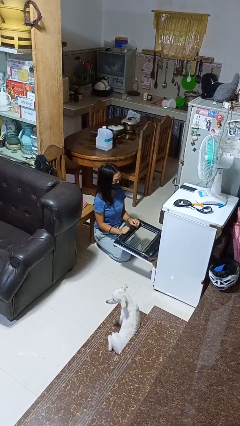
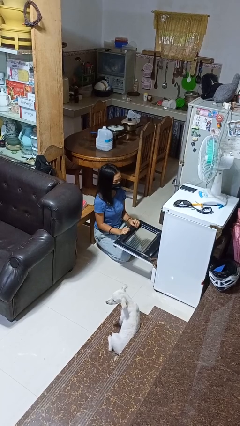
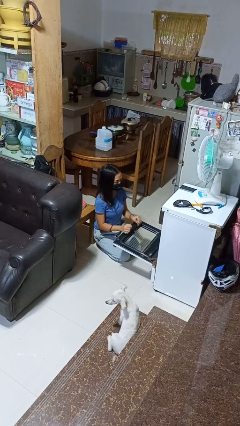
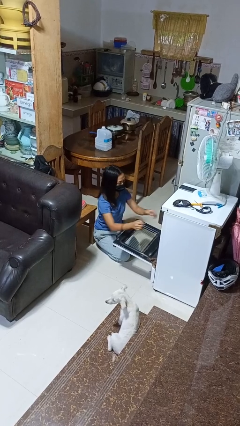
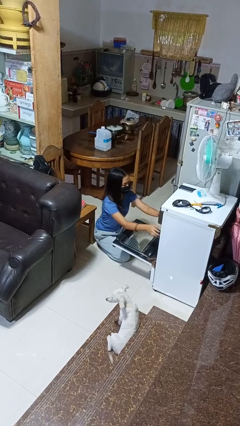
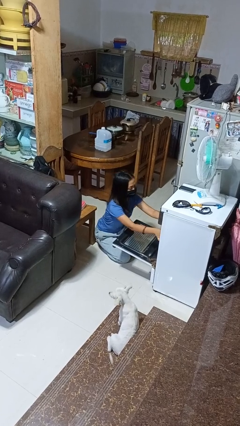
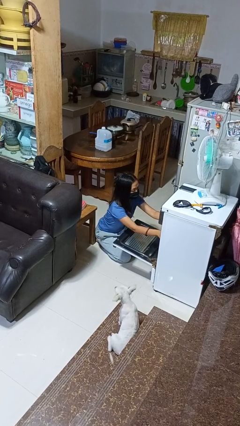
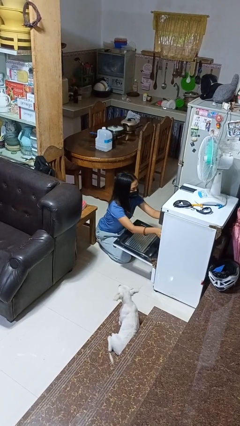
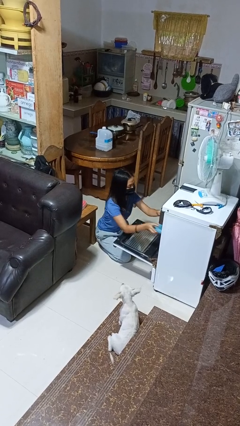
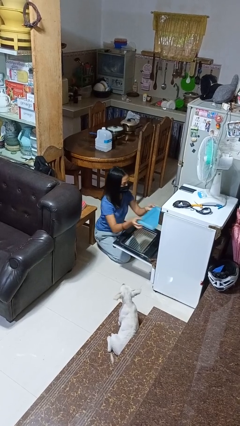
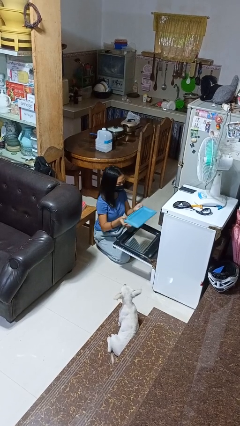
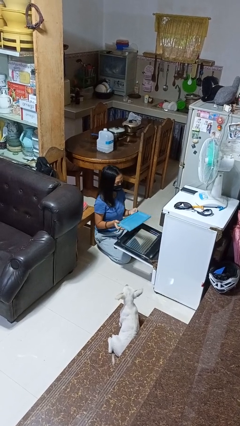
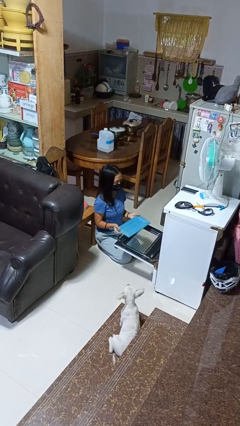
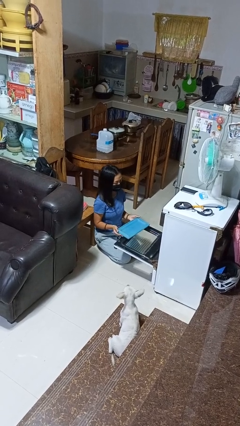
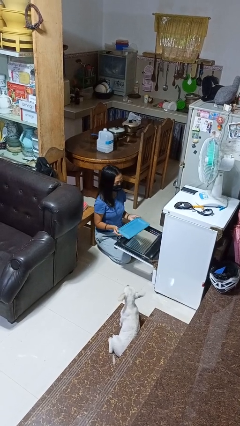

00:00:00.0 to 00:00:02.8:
person takes object from oven

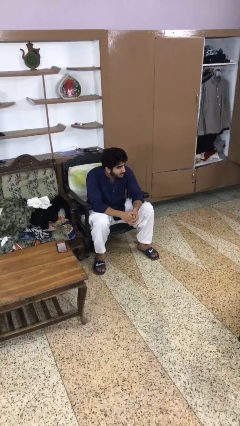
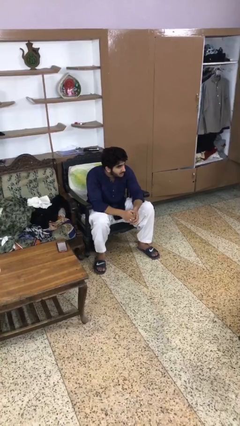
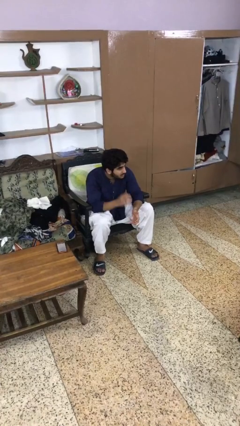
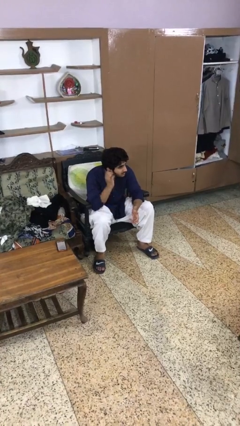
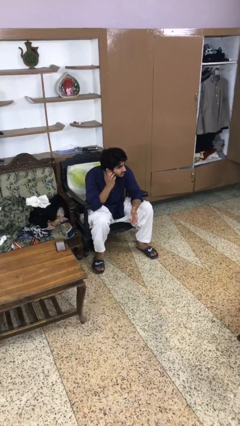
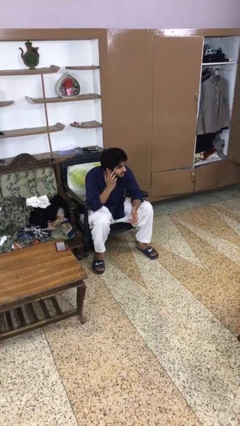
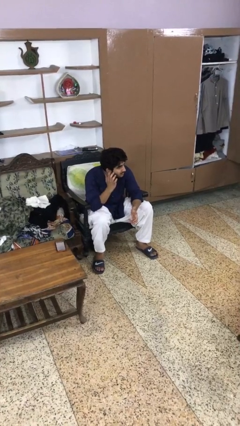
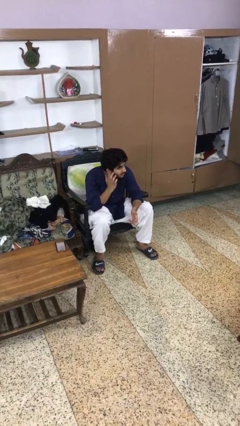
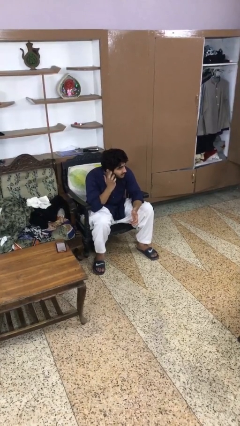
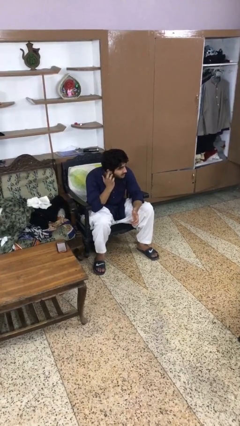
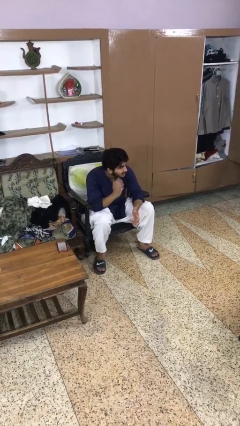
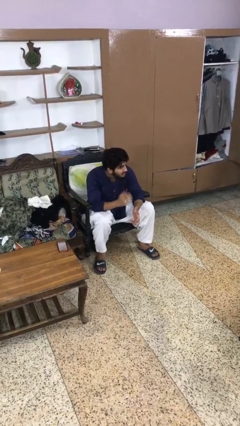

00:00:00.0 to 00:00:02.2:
person puts fingers in ear

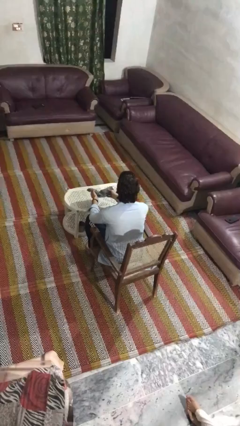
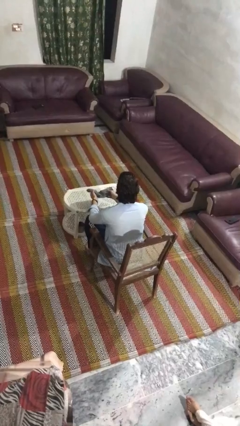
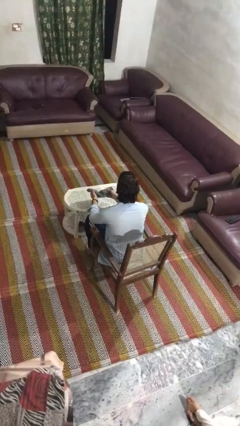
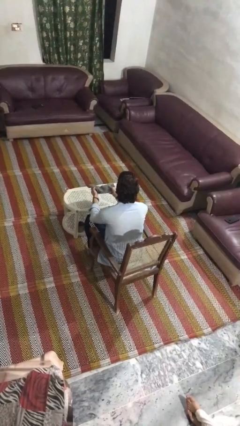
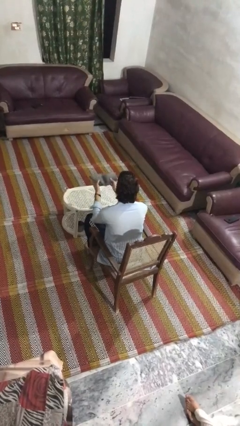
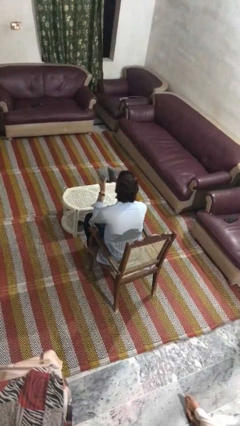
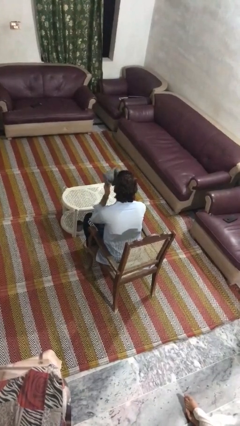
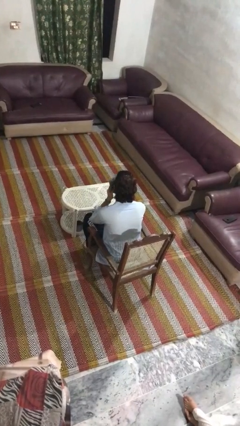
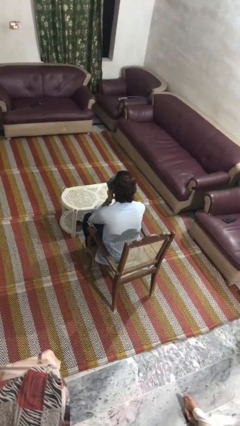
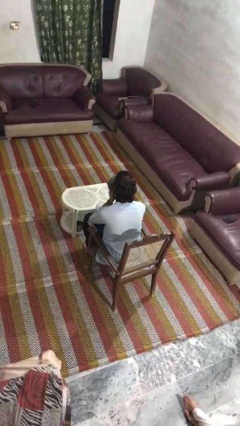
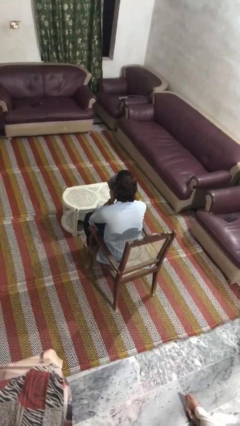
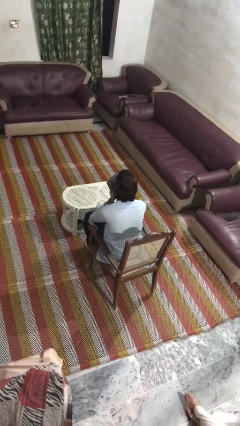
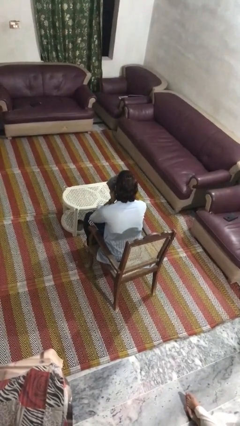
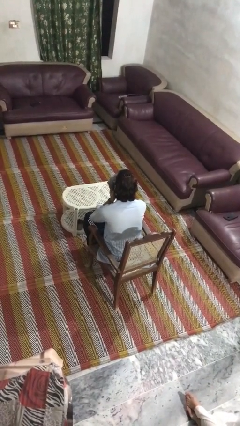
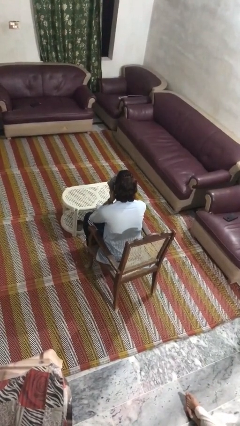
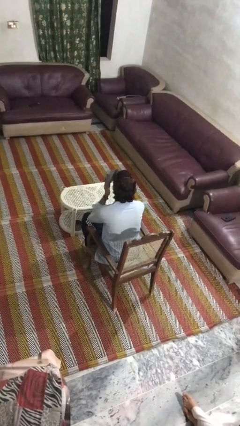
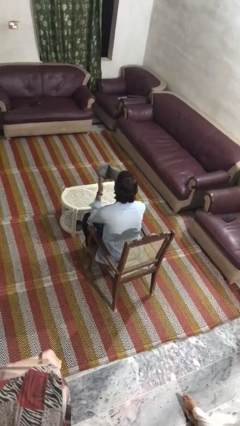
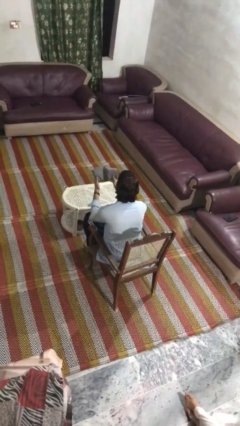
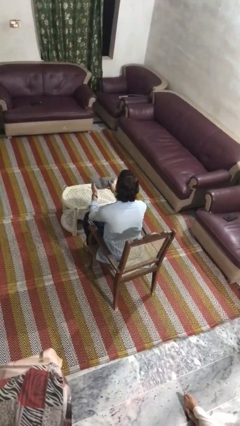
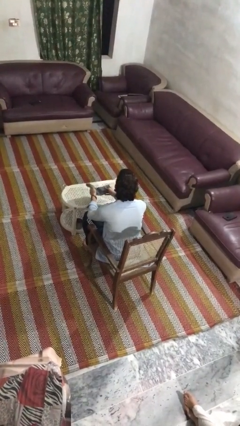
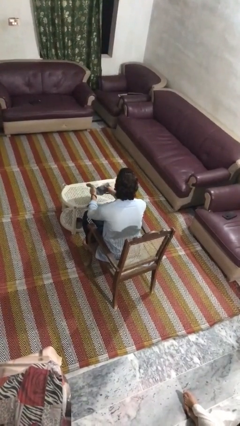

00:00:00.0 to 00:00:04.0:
person wipes mouth with napkin

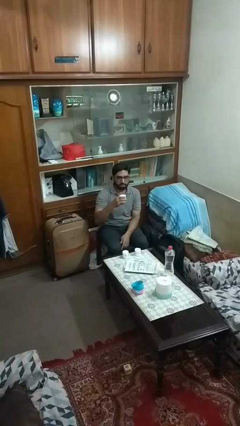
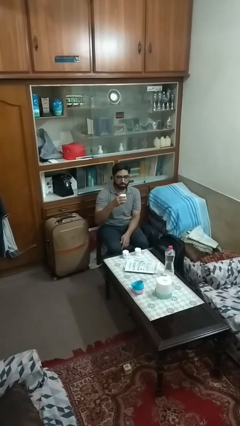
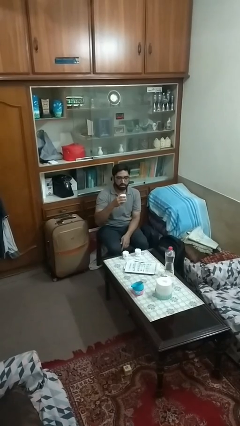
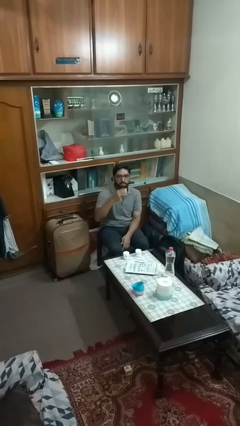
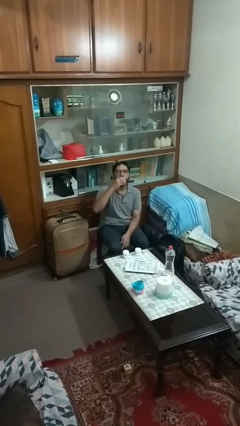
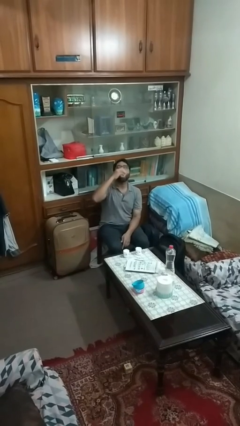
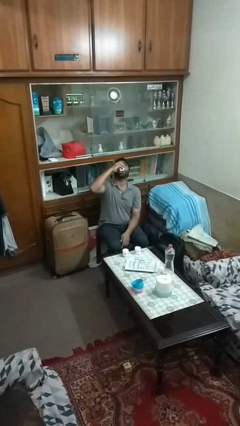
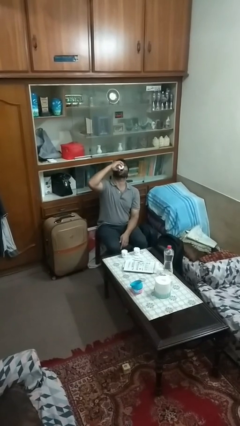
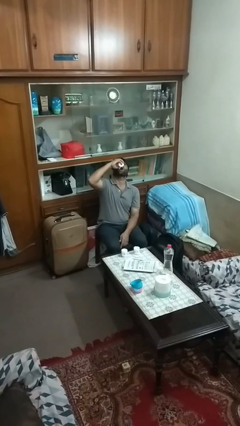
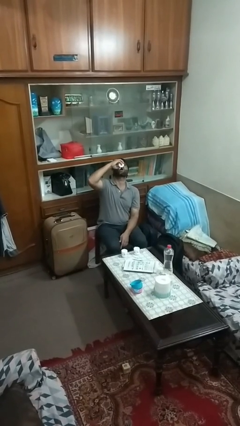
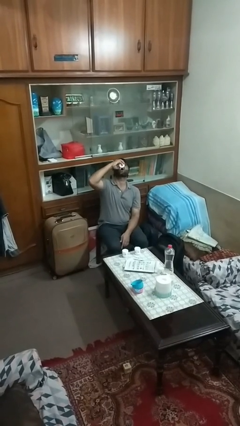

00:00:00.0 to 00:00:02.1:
person drinks from shotglass

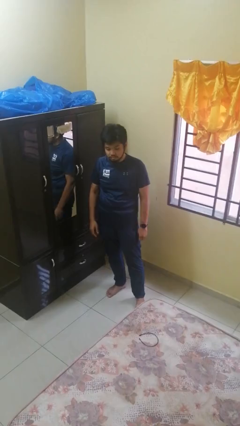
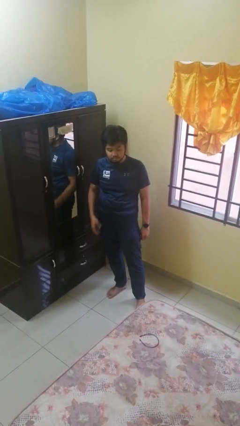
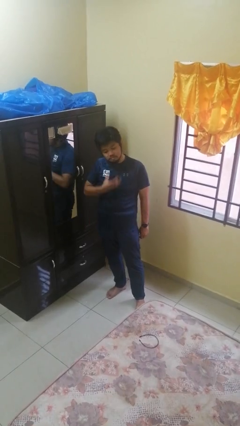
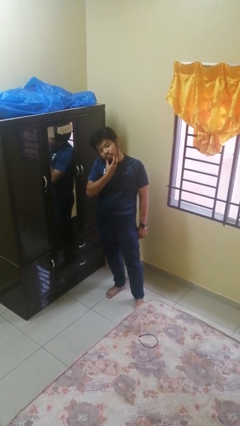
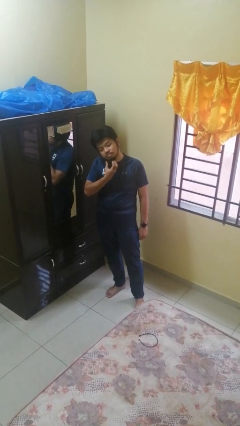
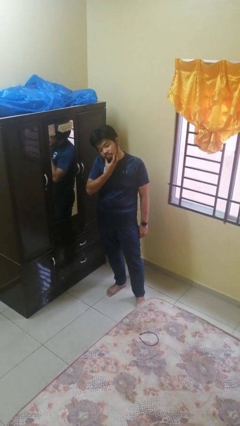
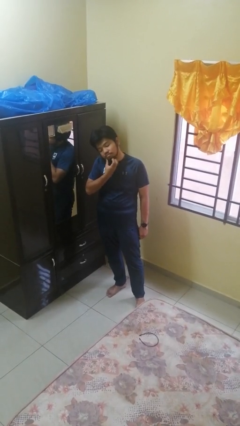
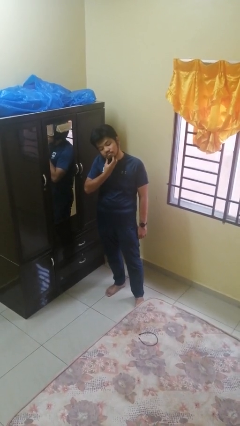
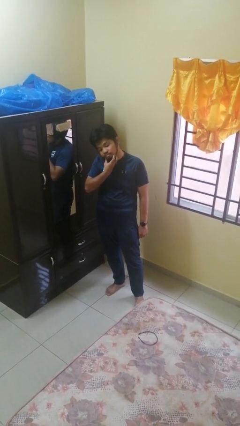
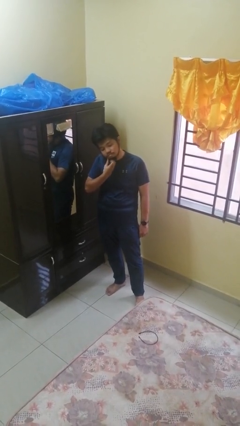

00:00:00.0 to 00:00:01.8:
person scratches face

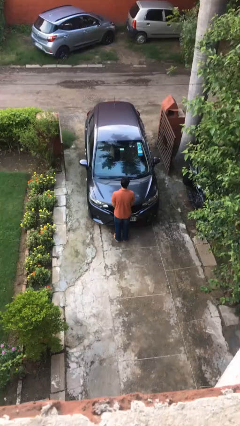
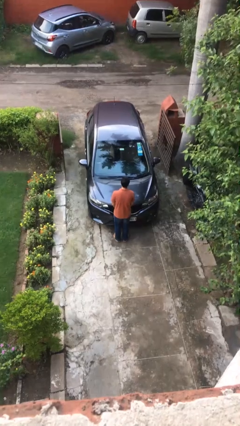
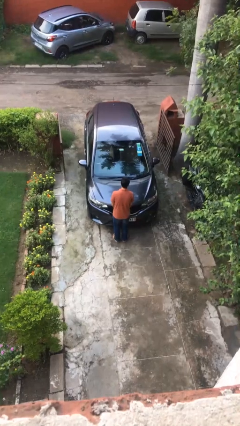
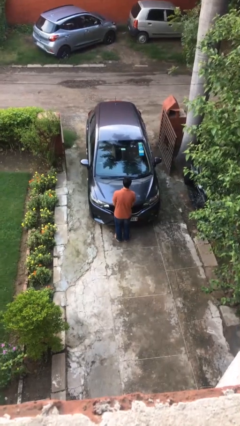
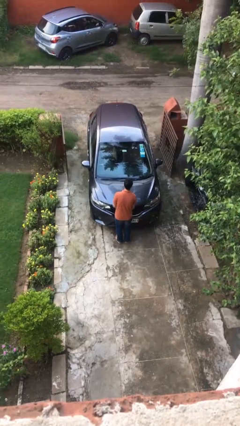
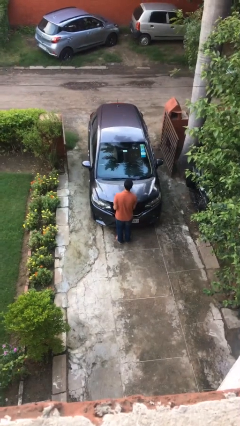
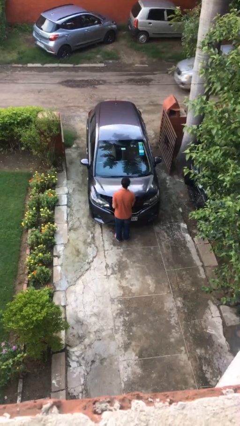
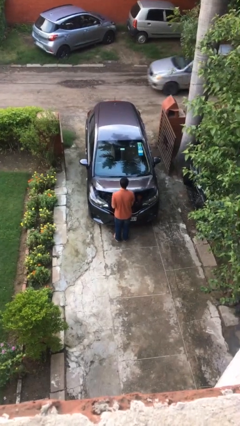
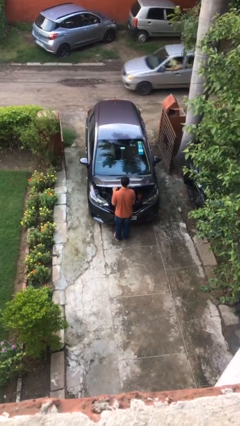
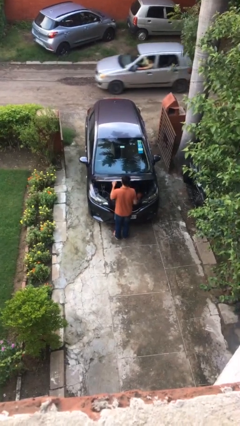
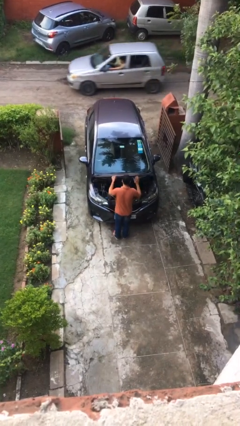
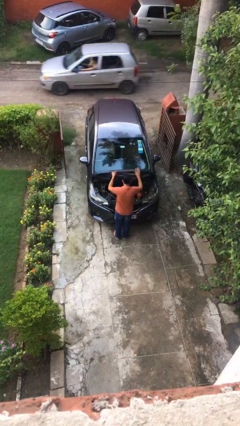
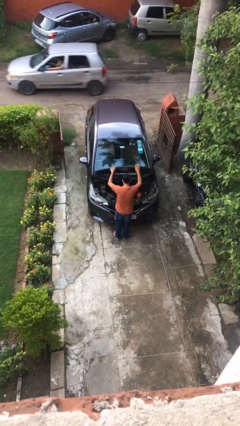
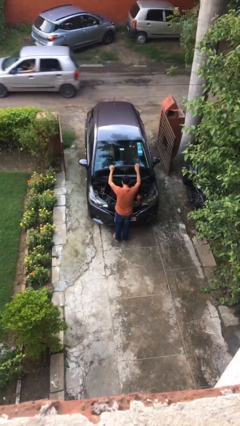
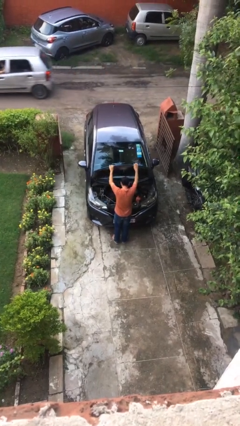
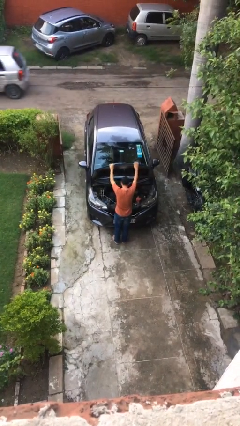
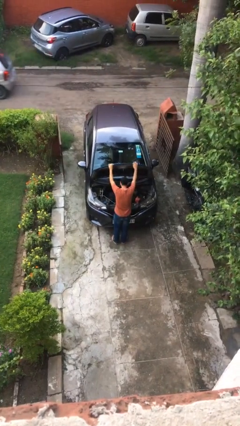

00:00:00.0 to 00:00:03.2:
person opens car hood

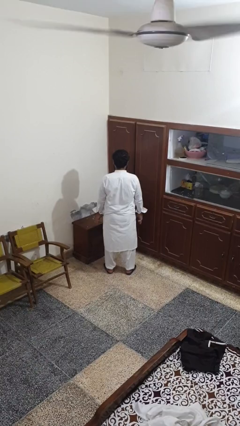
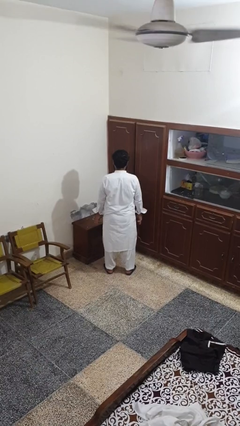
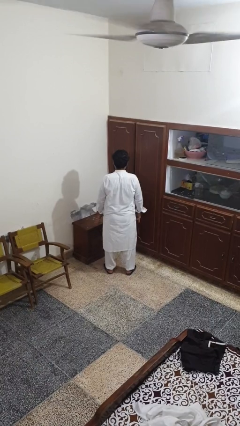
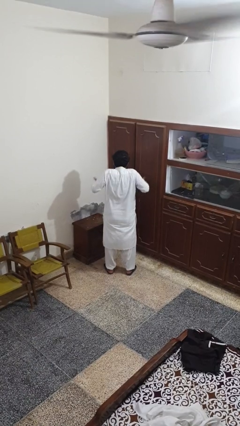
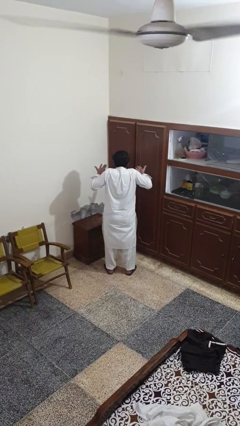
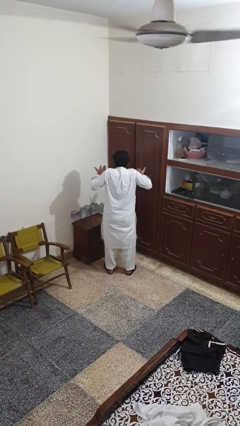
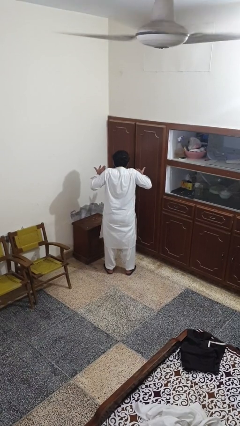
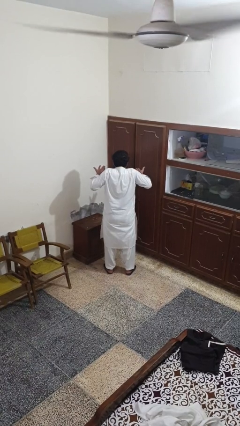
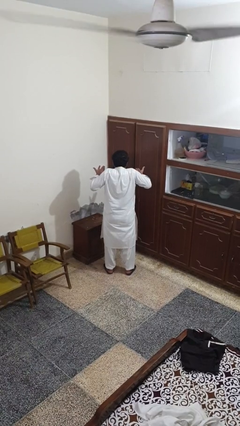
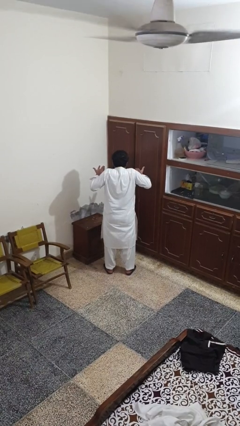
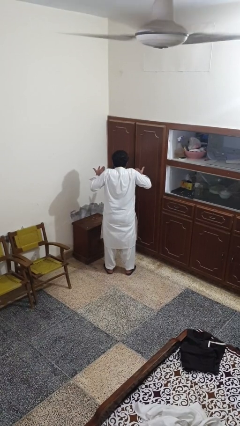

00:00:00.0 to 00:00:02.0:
person shrugs
